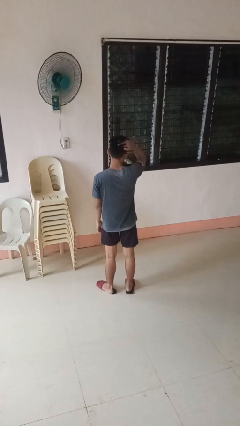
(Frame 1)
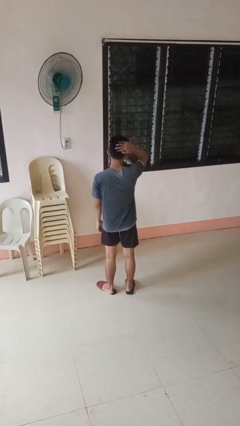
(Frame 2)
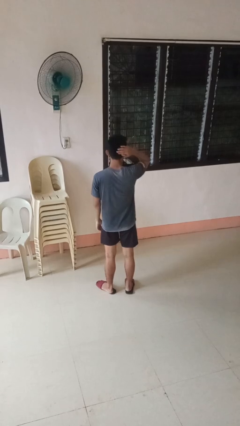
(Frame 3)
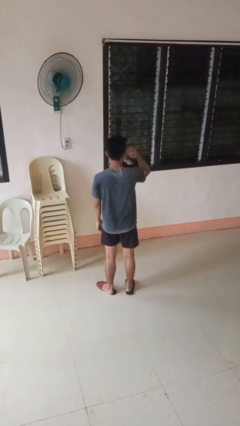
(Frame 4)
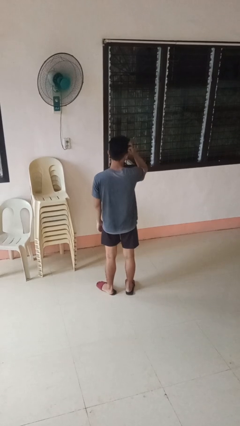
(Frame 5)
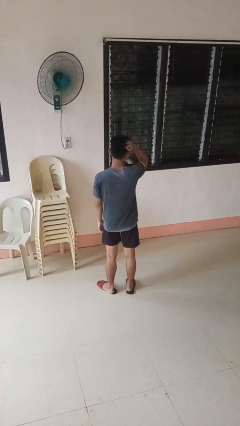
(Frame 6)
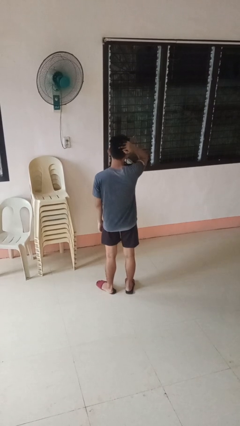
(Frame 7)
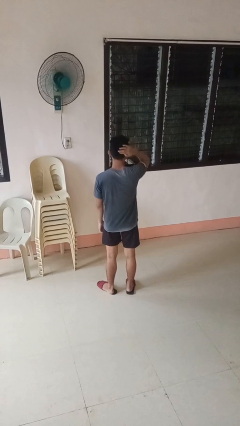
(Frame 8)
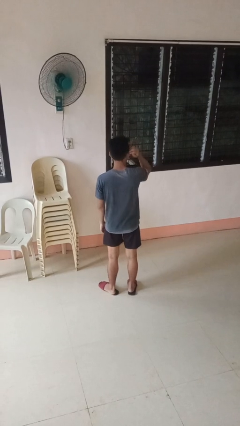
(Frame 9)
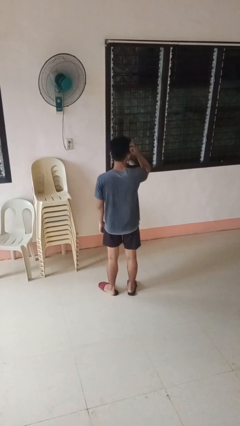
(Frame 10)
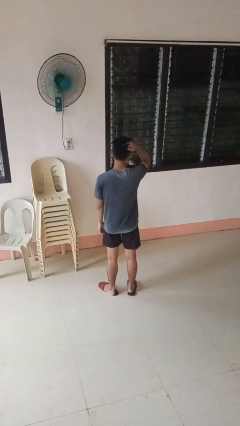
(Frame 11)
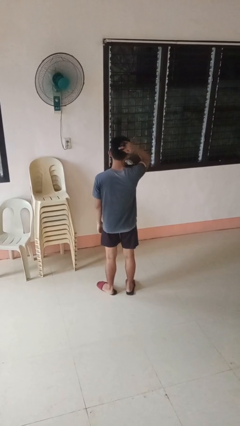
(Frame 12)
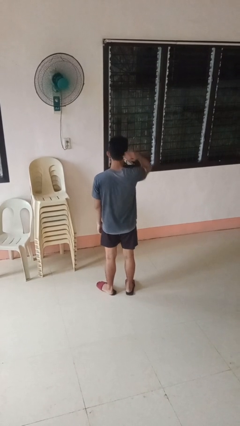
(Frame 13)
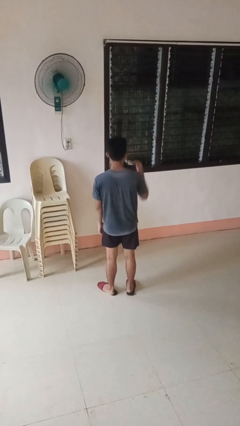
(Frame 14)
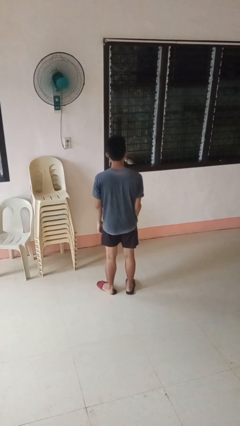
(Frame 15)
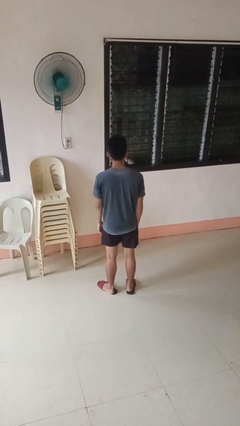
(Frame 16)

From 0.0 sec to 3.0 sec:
person strokes hair

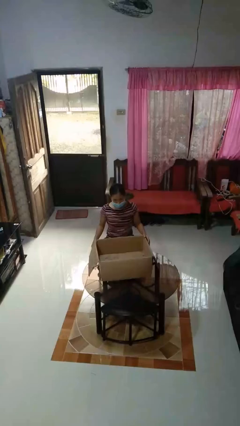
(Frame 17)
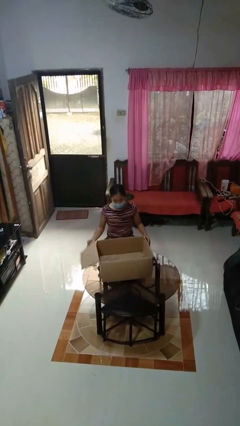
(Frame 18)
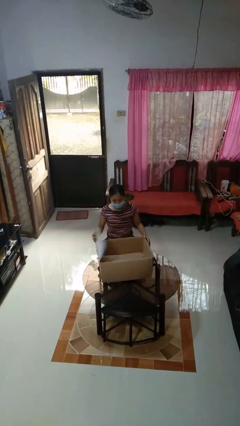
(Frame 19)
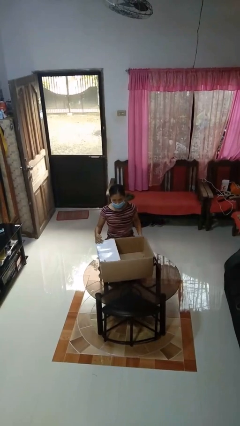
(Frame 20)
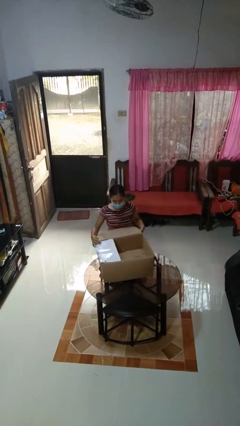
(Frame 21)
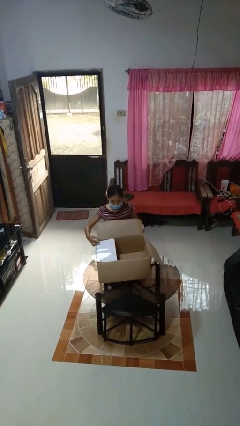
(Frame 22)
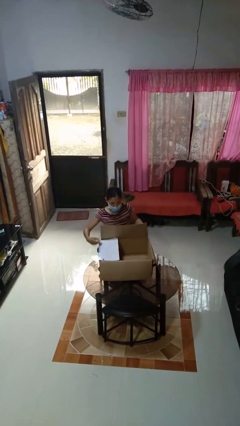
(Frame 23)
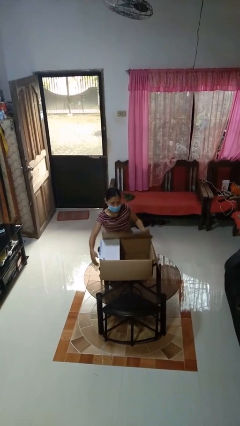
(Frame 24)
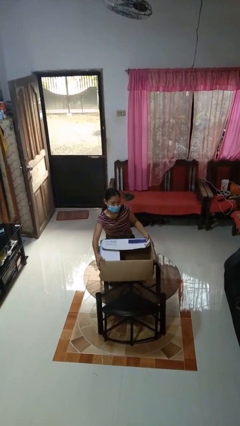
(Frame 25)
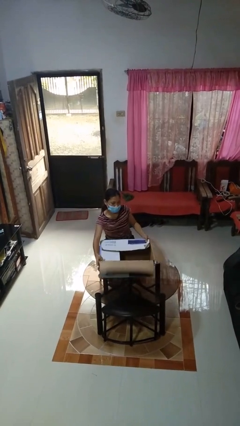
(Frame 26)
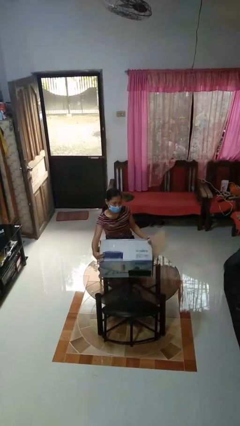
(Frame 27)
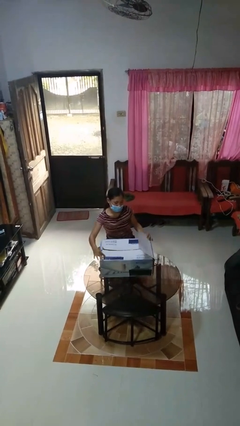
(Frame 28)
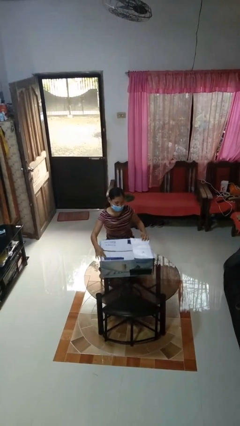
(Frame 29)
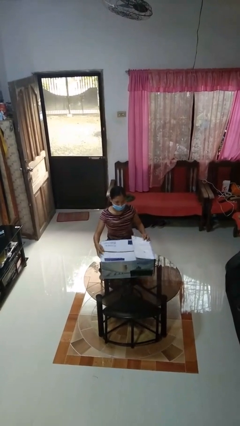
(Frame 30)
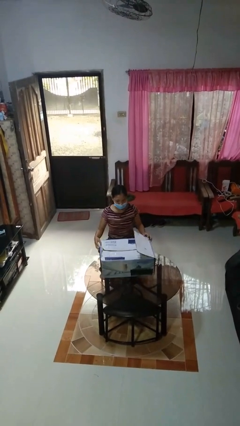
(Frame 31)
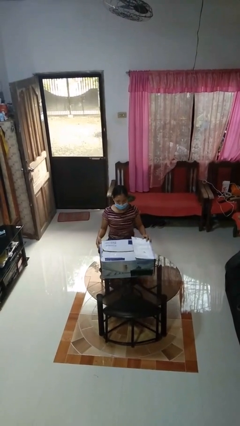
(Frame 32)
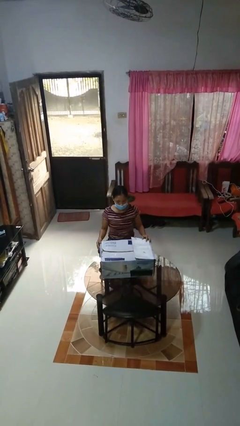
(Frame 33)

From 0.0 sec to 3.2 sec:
person closes box

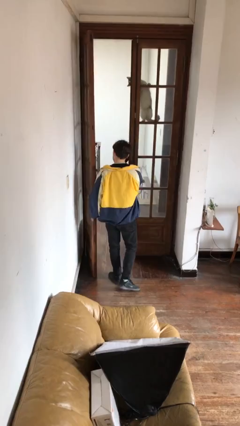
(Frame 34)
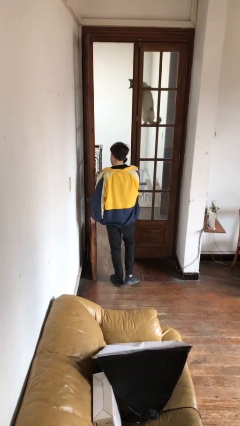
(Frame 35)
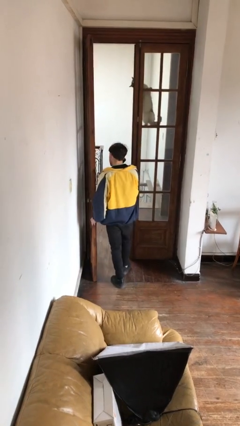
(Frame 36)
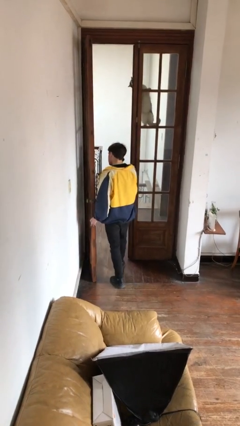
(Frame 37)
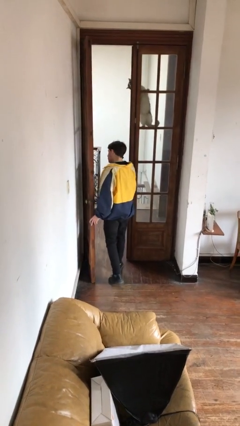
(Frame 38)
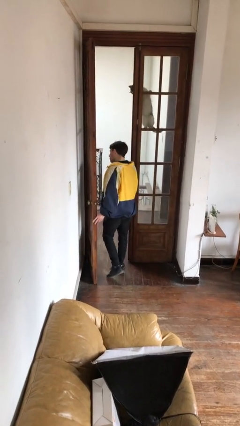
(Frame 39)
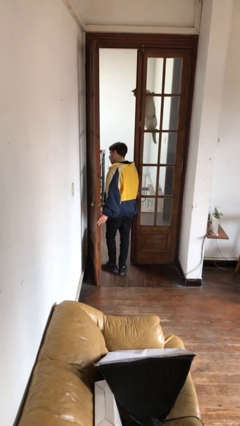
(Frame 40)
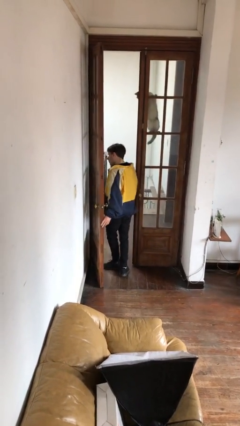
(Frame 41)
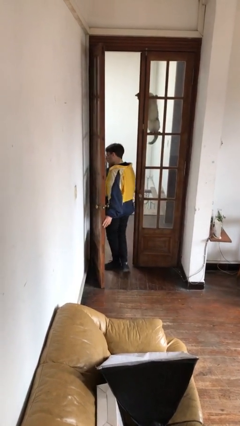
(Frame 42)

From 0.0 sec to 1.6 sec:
person exits scene through structure

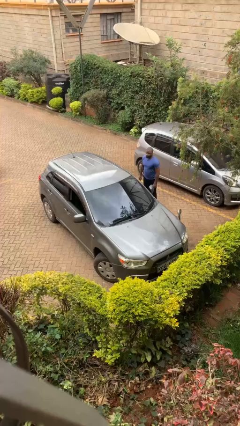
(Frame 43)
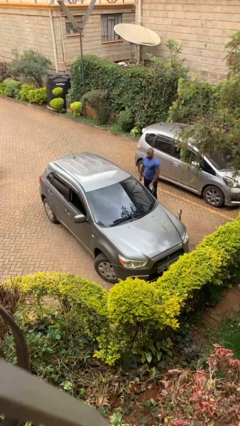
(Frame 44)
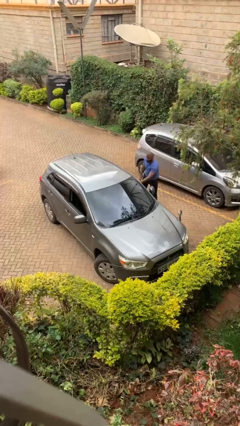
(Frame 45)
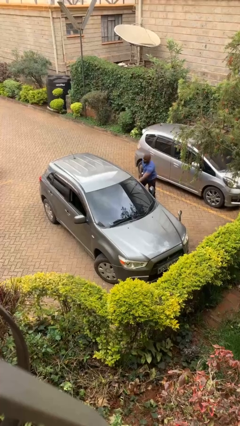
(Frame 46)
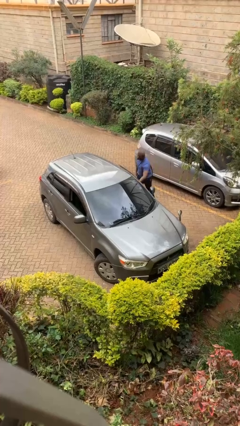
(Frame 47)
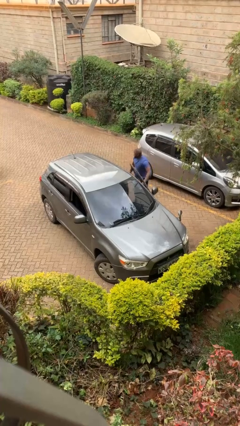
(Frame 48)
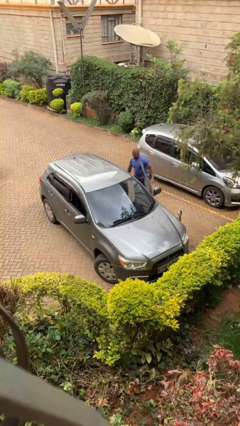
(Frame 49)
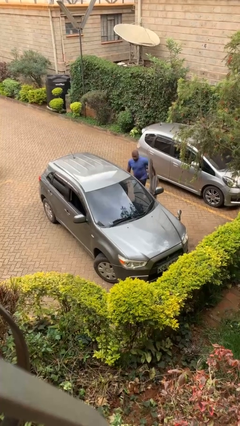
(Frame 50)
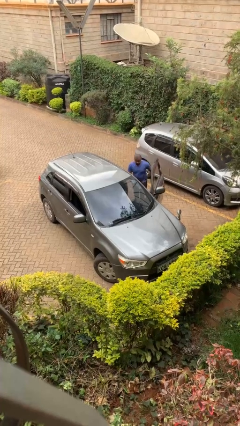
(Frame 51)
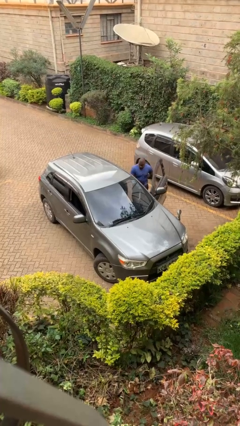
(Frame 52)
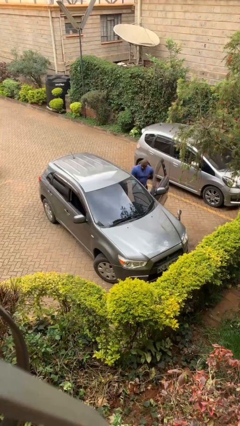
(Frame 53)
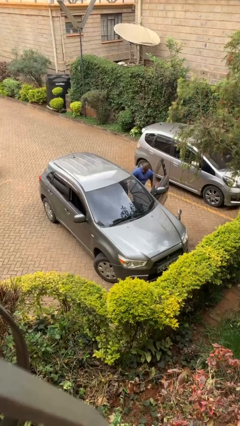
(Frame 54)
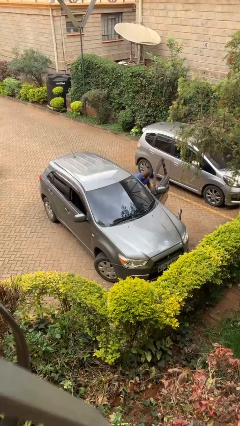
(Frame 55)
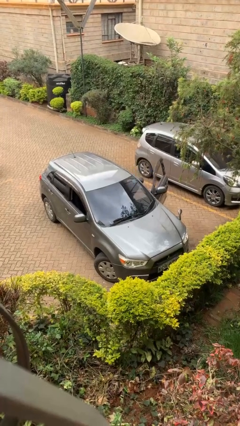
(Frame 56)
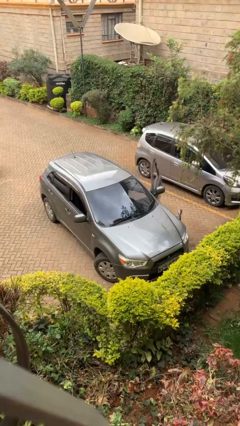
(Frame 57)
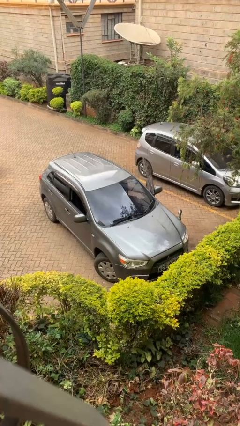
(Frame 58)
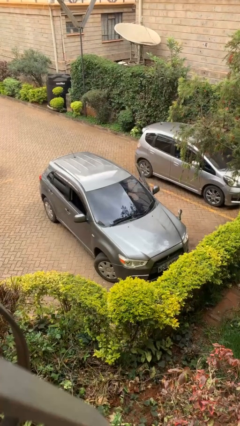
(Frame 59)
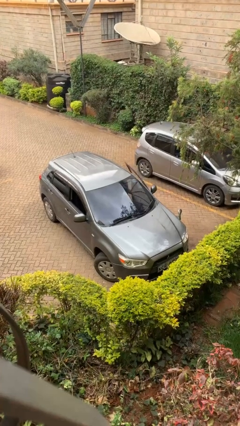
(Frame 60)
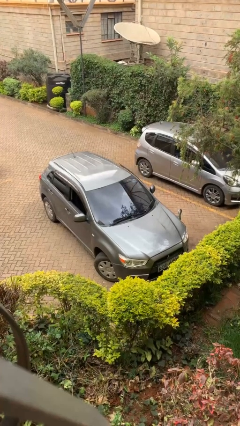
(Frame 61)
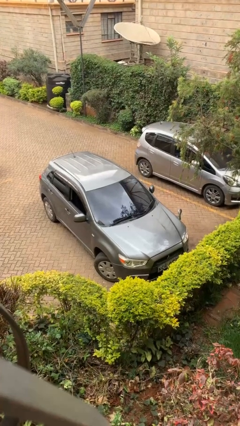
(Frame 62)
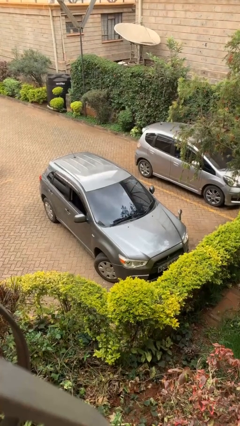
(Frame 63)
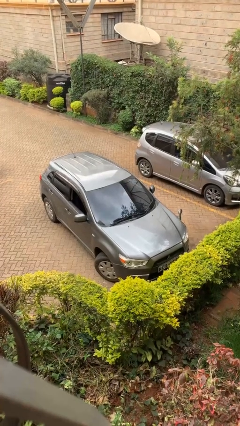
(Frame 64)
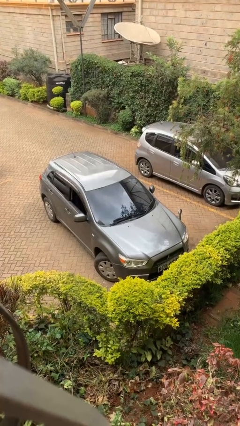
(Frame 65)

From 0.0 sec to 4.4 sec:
car picks up person

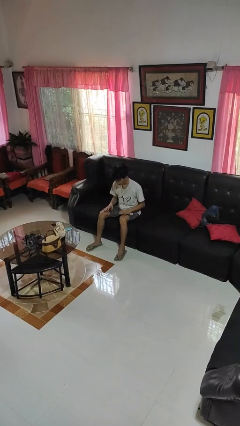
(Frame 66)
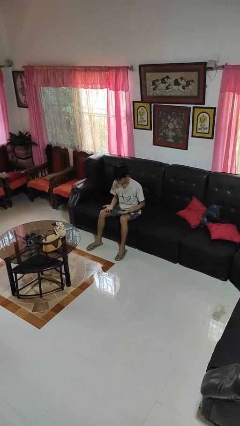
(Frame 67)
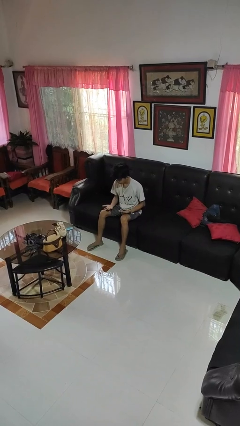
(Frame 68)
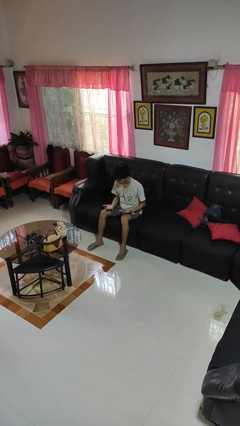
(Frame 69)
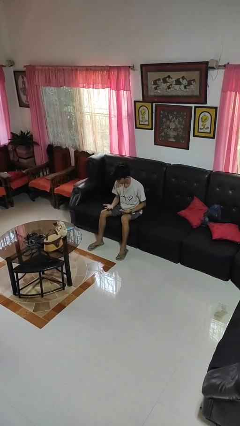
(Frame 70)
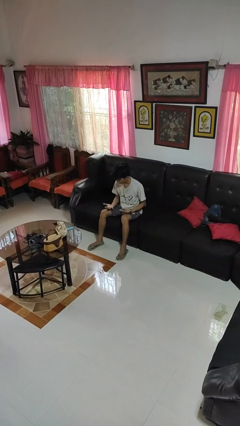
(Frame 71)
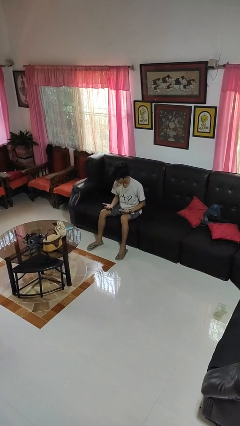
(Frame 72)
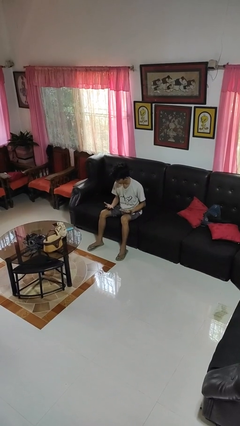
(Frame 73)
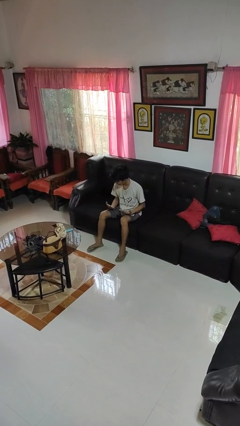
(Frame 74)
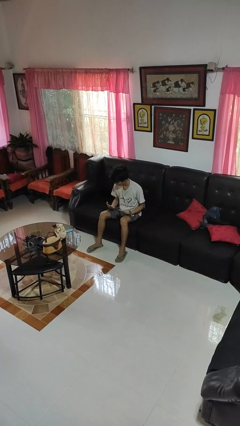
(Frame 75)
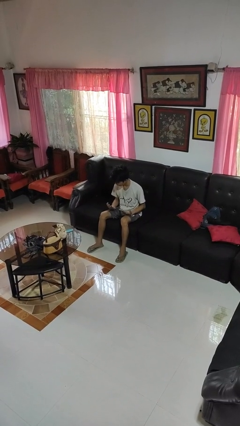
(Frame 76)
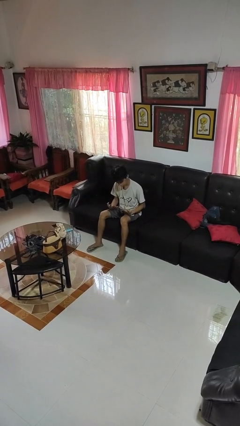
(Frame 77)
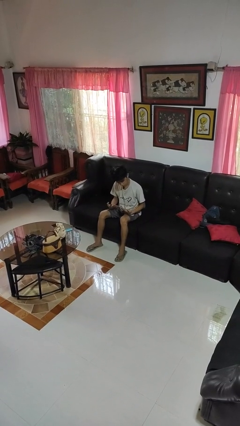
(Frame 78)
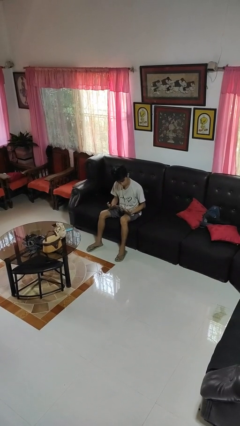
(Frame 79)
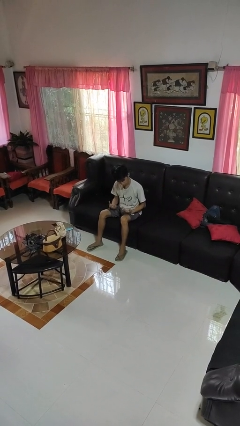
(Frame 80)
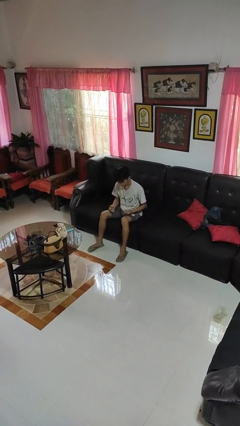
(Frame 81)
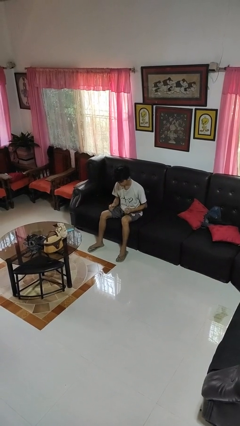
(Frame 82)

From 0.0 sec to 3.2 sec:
person looks at hands in lap

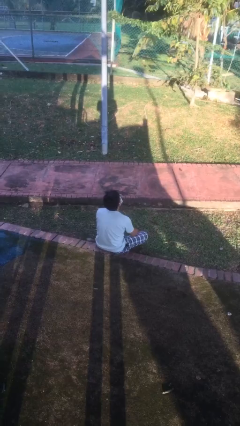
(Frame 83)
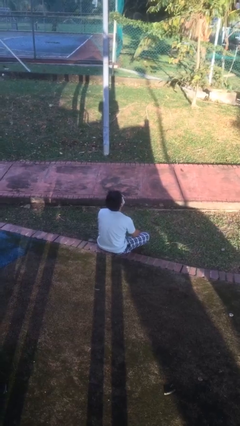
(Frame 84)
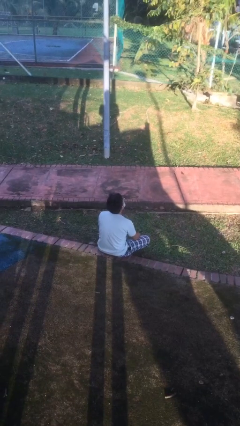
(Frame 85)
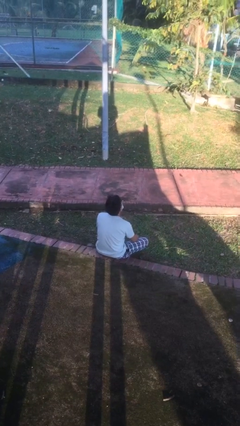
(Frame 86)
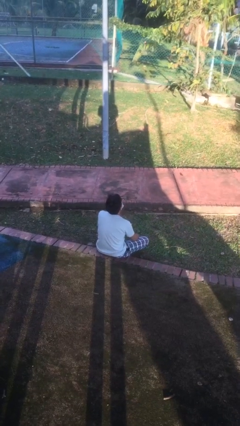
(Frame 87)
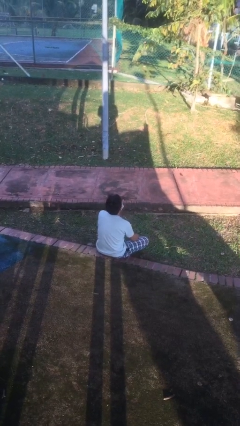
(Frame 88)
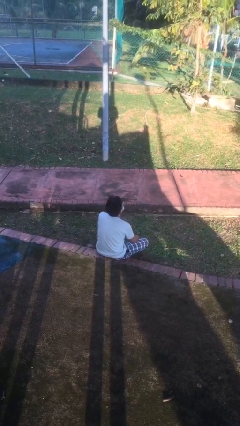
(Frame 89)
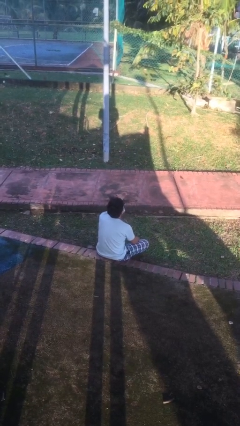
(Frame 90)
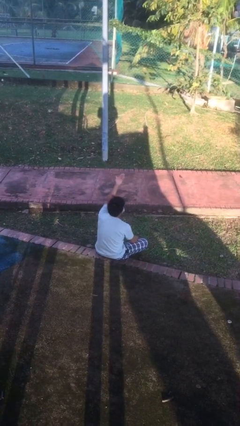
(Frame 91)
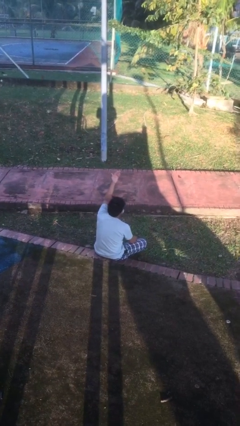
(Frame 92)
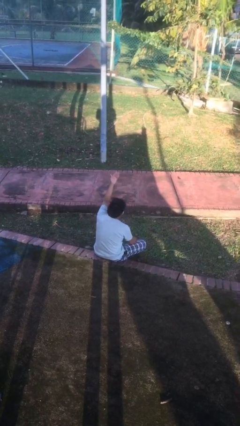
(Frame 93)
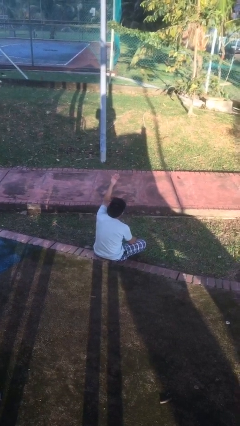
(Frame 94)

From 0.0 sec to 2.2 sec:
person gestures blow kiss
